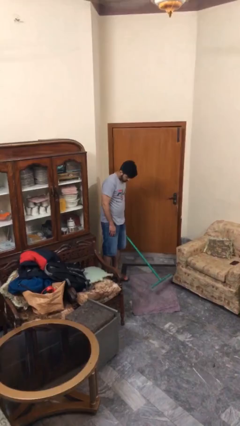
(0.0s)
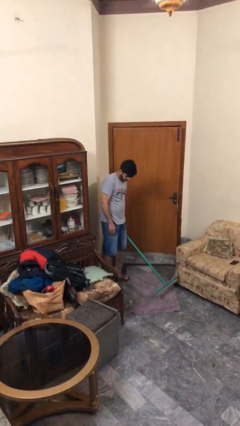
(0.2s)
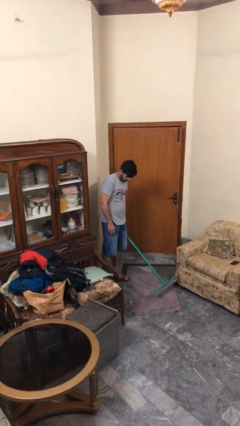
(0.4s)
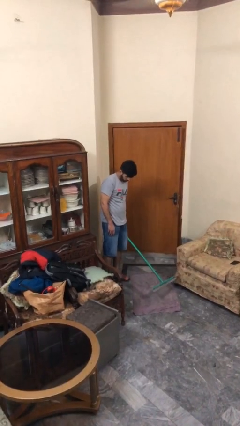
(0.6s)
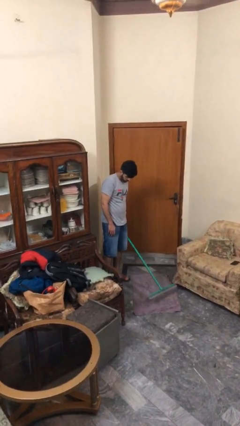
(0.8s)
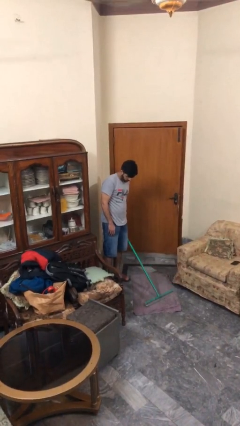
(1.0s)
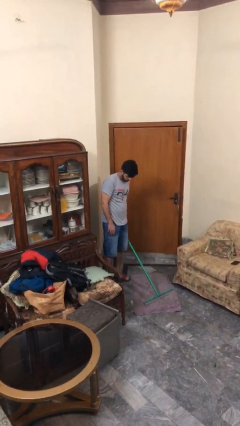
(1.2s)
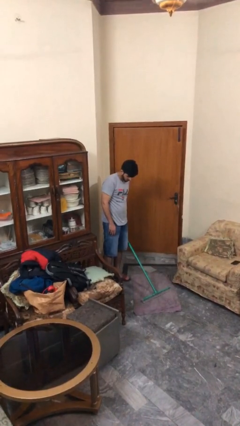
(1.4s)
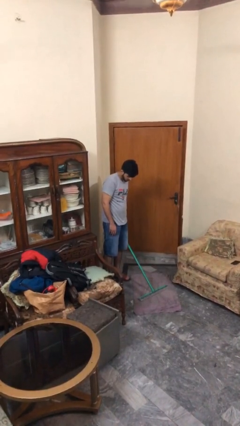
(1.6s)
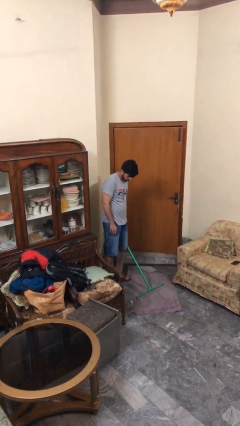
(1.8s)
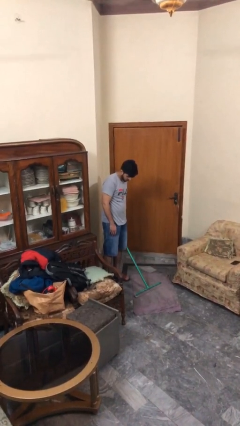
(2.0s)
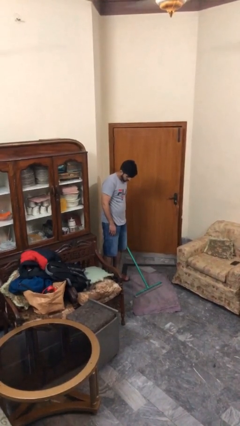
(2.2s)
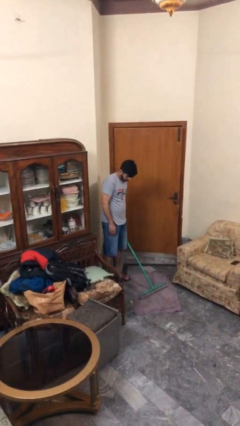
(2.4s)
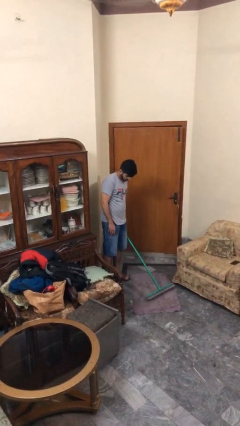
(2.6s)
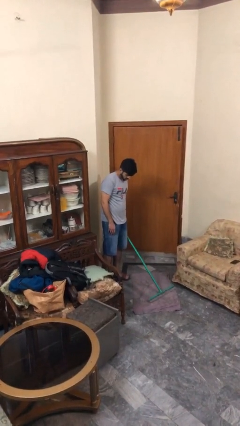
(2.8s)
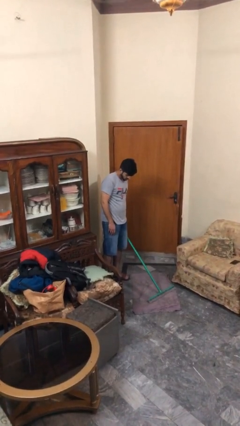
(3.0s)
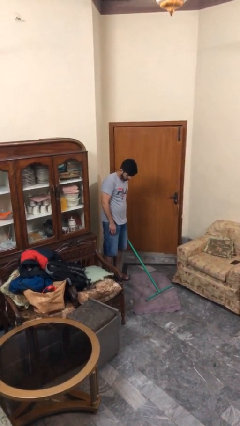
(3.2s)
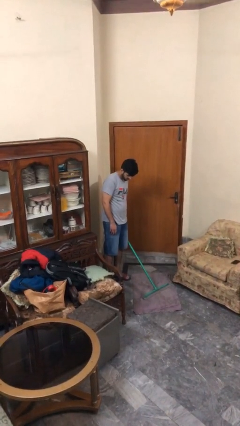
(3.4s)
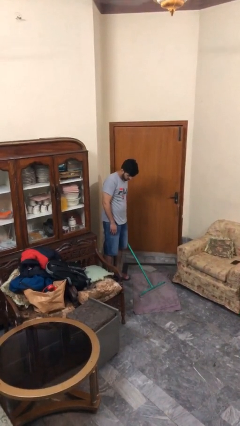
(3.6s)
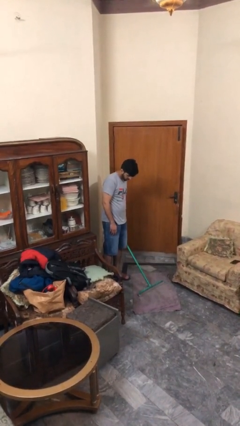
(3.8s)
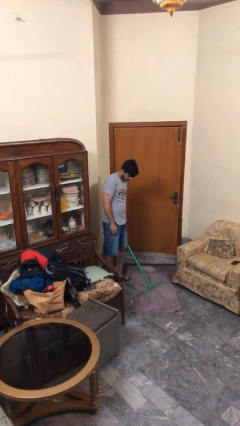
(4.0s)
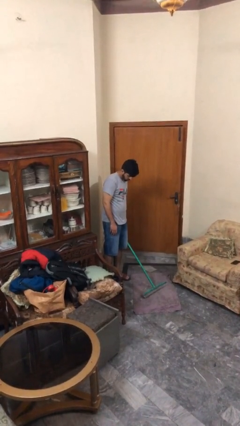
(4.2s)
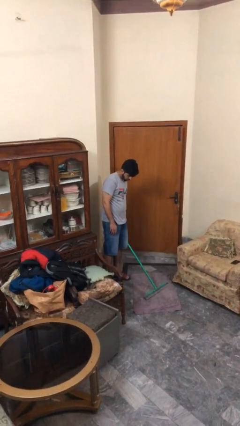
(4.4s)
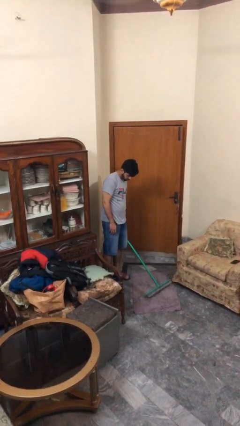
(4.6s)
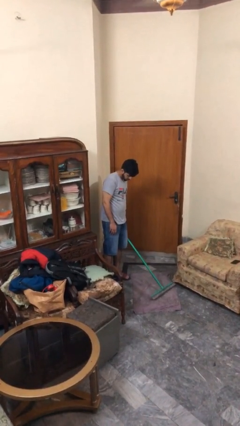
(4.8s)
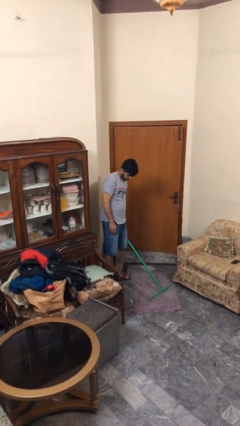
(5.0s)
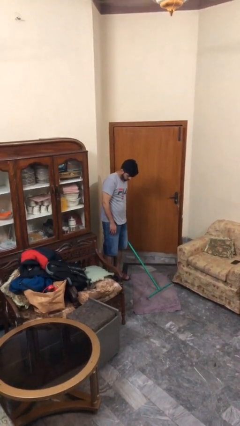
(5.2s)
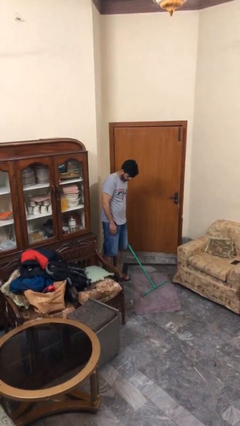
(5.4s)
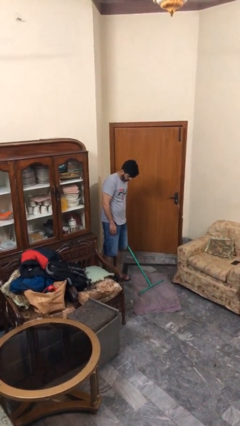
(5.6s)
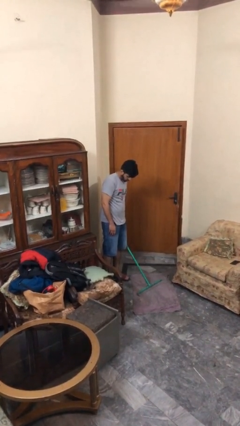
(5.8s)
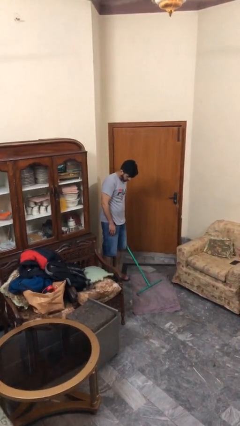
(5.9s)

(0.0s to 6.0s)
person vacuums carpet

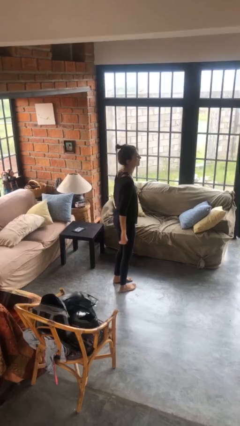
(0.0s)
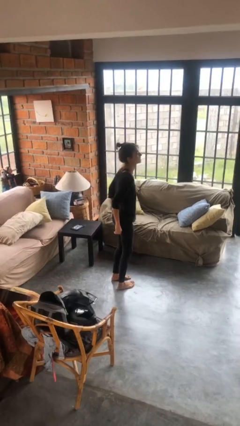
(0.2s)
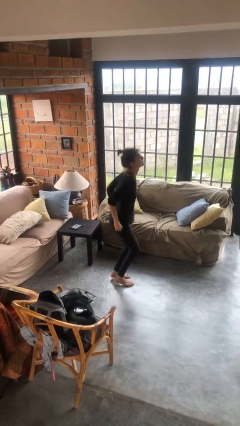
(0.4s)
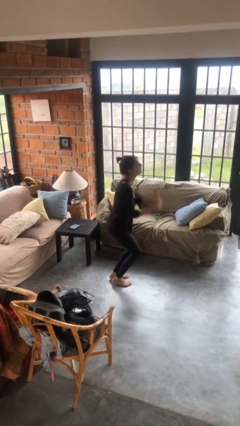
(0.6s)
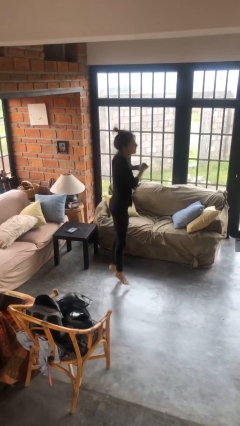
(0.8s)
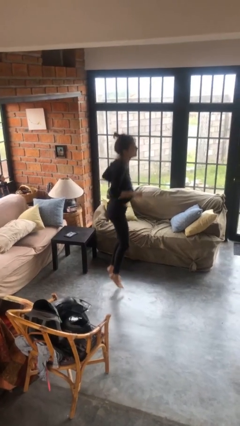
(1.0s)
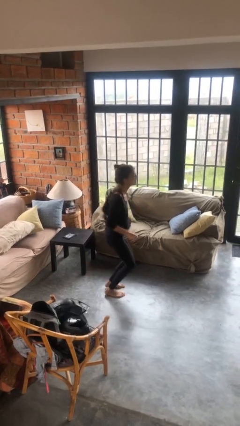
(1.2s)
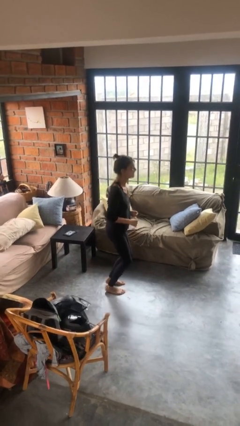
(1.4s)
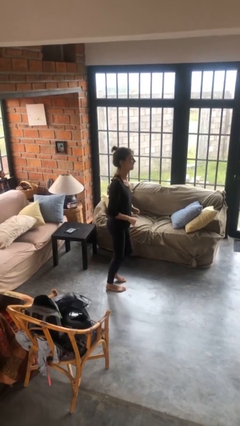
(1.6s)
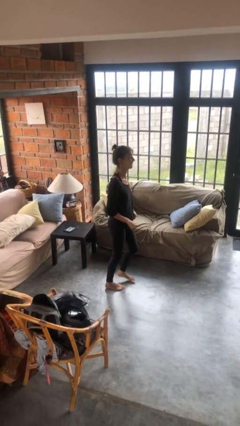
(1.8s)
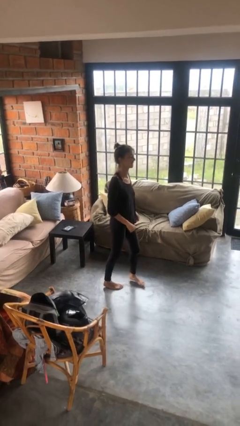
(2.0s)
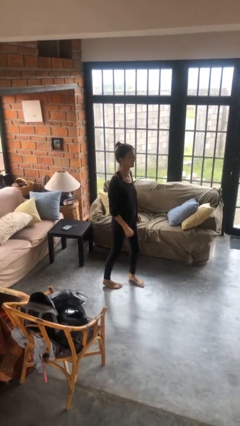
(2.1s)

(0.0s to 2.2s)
person jumps

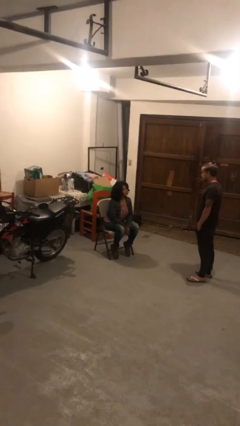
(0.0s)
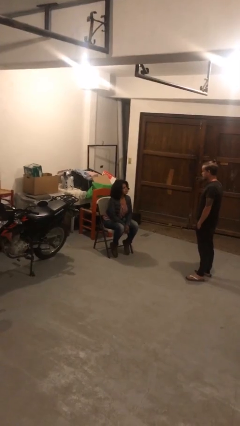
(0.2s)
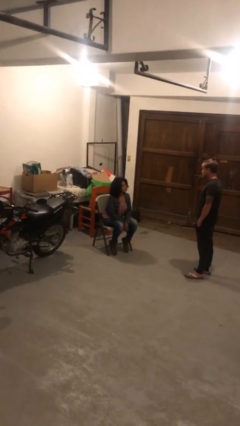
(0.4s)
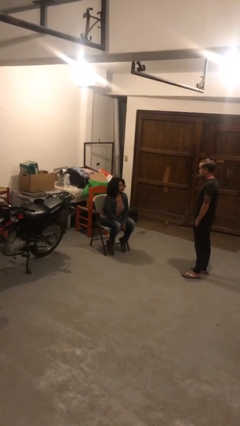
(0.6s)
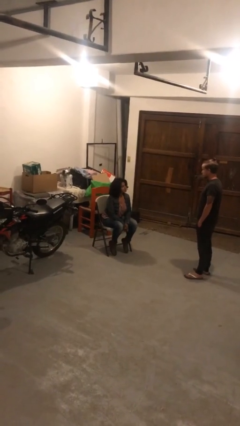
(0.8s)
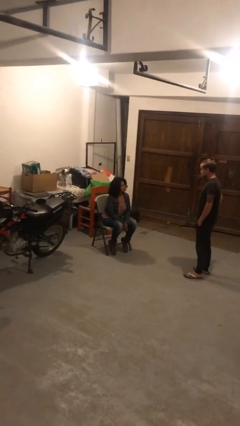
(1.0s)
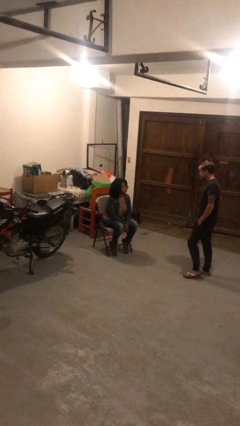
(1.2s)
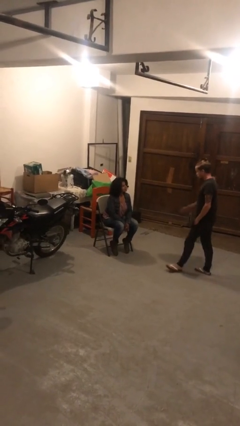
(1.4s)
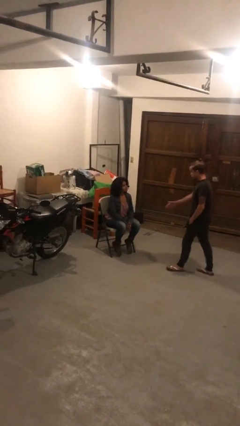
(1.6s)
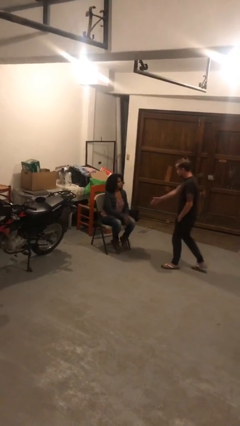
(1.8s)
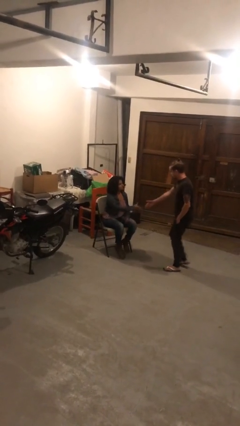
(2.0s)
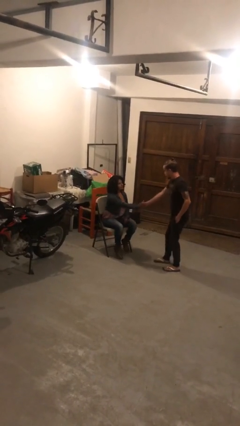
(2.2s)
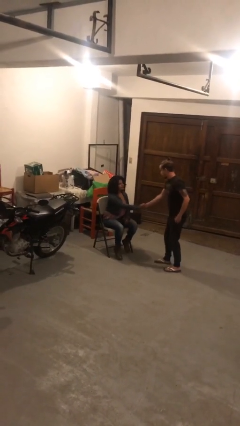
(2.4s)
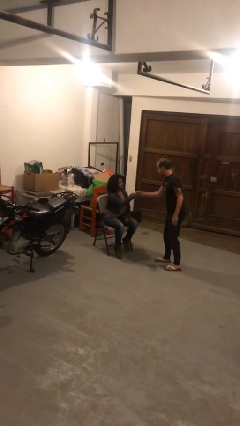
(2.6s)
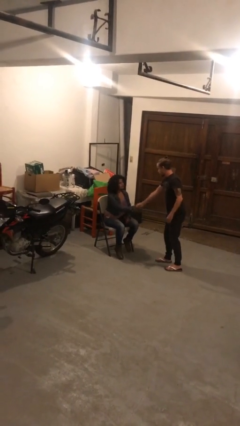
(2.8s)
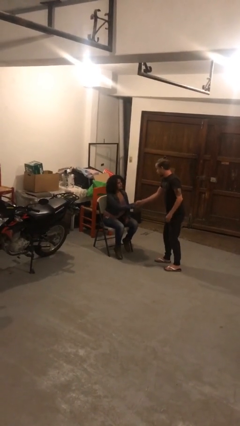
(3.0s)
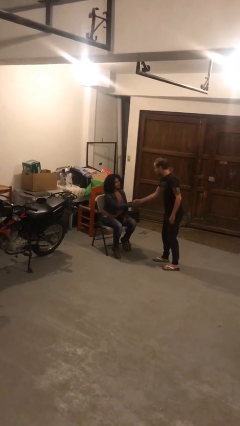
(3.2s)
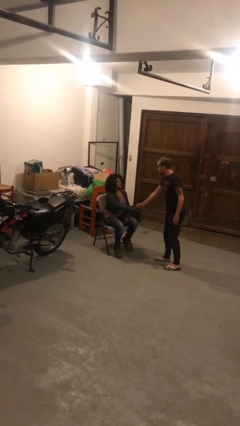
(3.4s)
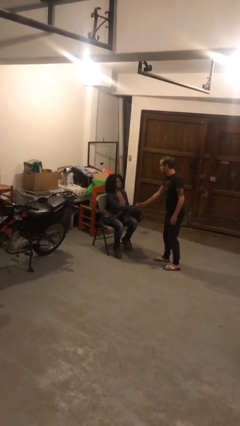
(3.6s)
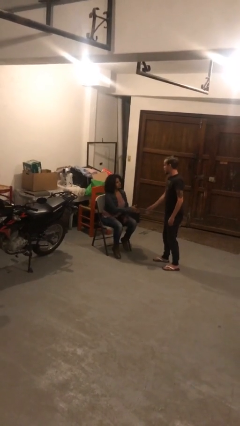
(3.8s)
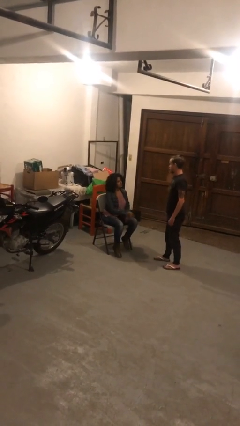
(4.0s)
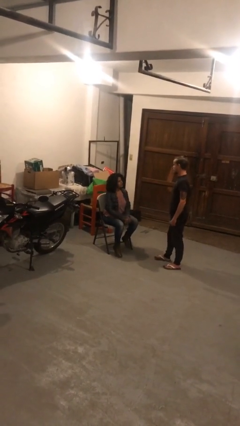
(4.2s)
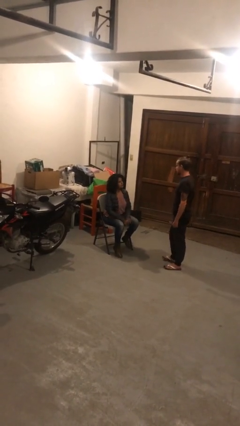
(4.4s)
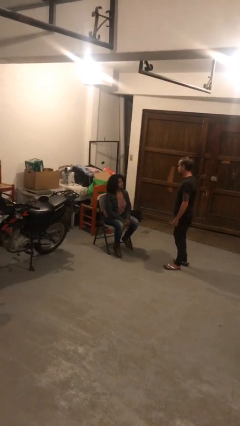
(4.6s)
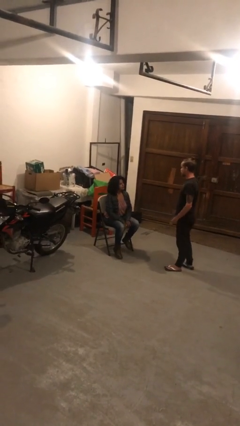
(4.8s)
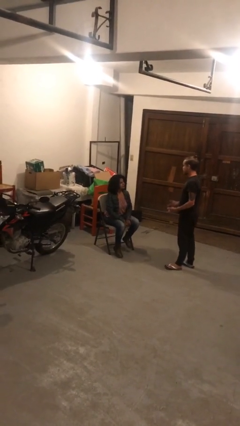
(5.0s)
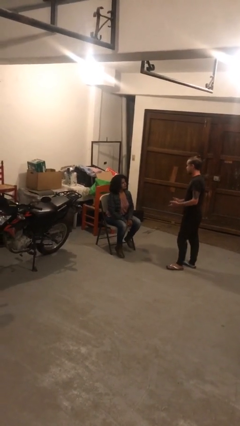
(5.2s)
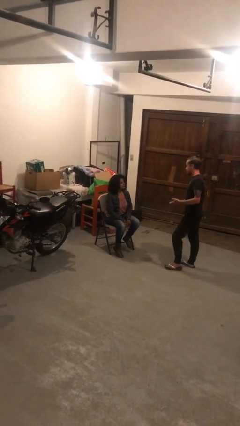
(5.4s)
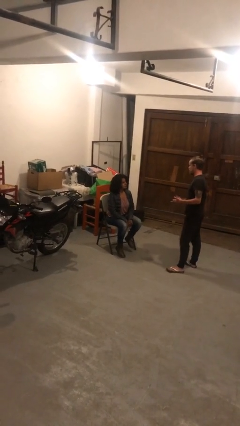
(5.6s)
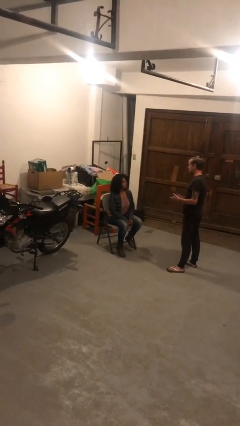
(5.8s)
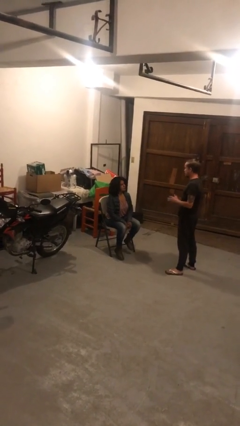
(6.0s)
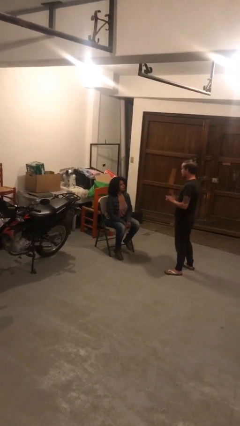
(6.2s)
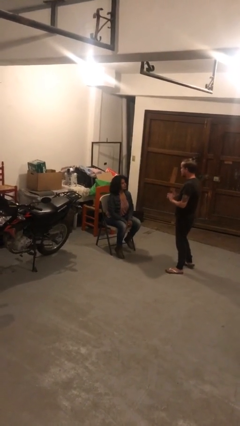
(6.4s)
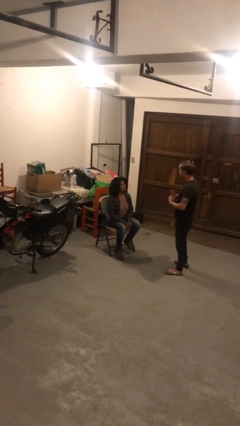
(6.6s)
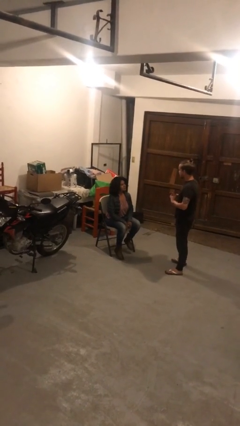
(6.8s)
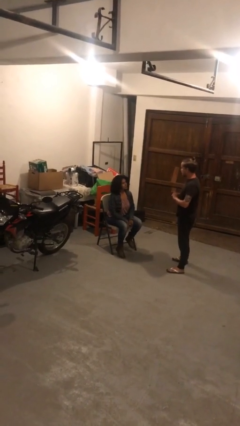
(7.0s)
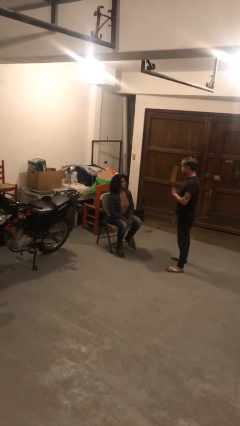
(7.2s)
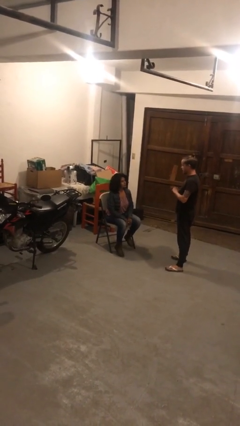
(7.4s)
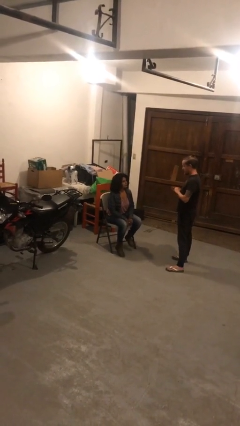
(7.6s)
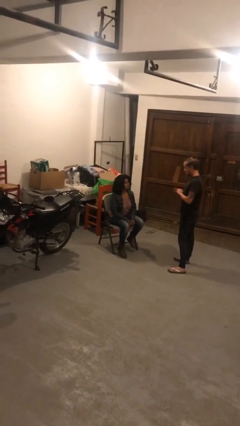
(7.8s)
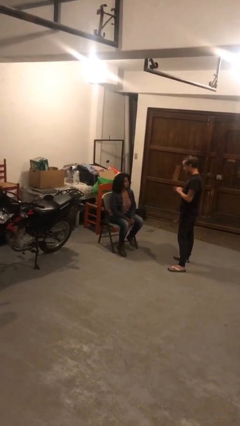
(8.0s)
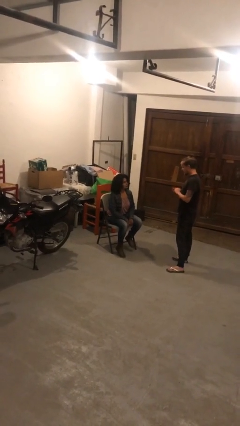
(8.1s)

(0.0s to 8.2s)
person shakes hand

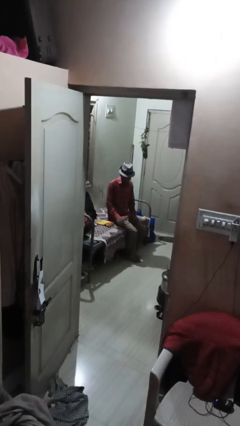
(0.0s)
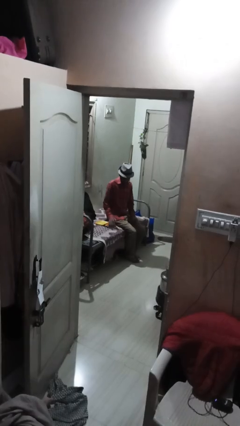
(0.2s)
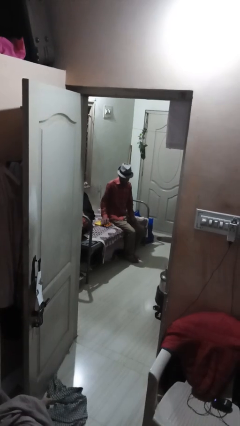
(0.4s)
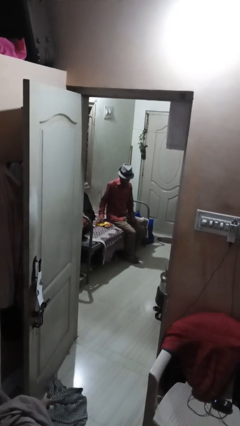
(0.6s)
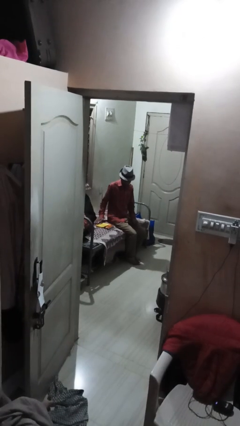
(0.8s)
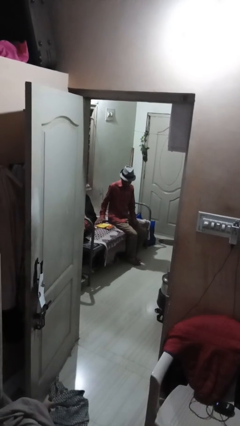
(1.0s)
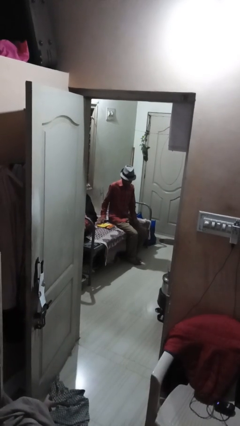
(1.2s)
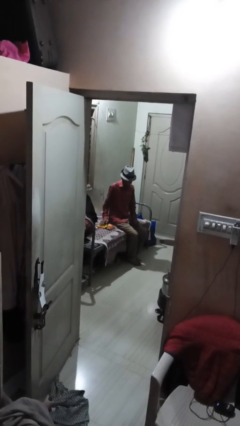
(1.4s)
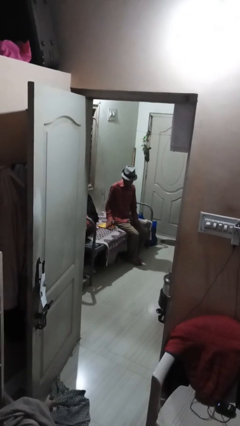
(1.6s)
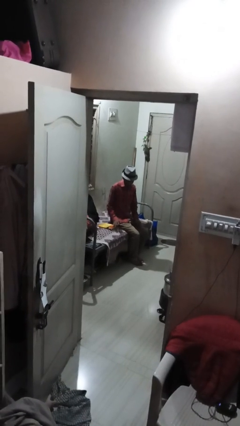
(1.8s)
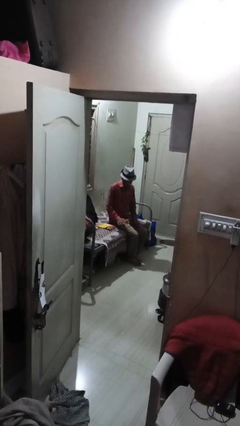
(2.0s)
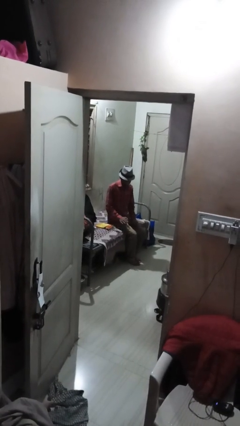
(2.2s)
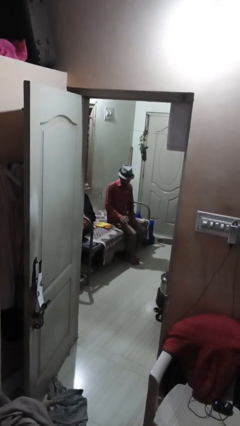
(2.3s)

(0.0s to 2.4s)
person waves hand over object
